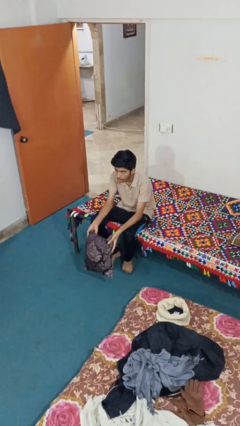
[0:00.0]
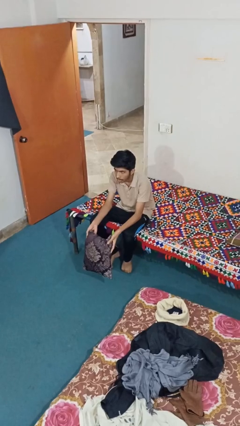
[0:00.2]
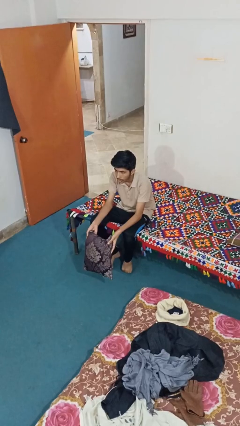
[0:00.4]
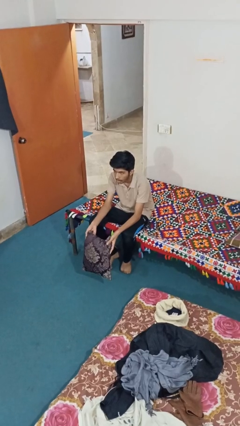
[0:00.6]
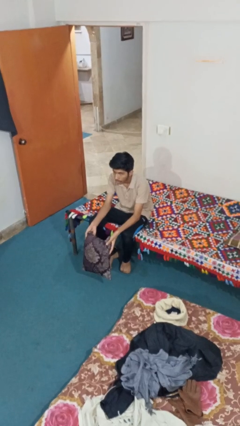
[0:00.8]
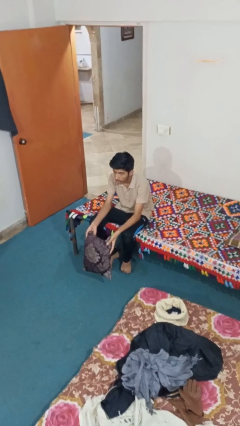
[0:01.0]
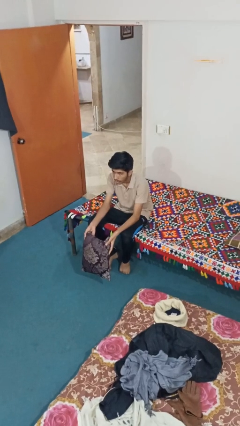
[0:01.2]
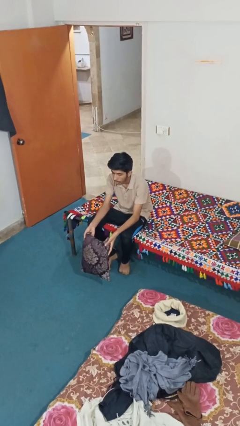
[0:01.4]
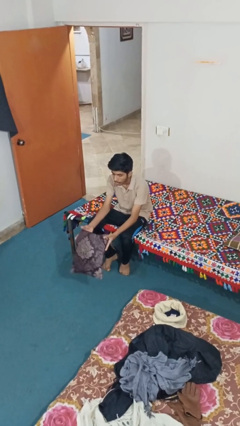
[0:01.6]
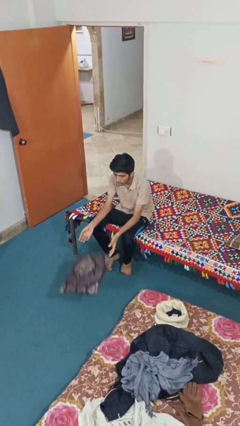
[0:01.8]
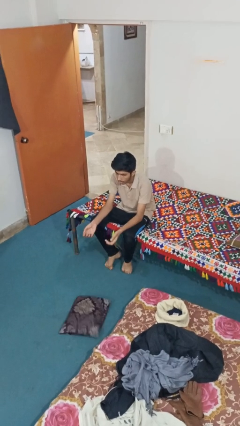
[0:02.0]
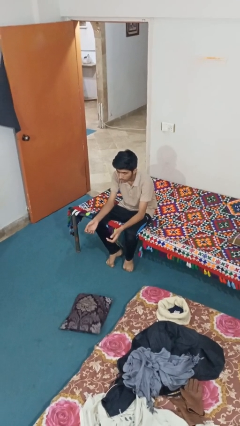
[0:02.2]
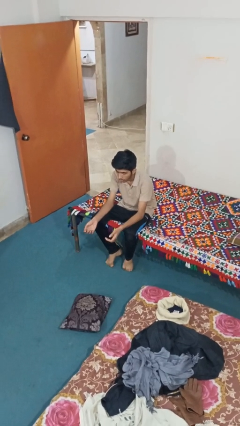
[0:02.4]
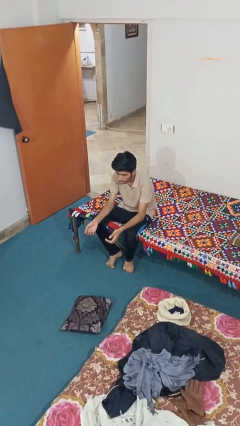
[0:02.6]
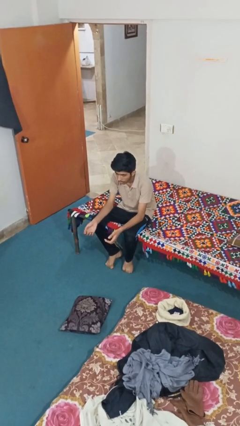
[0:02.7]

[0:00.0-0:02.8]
person drops object

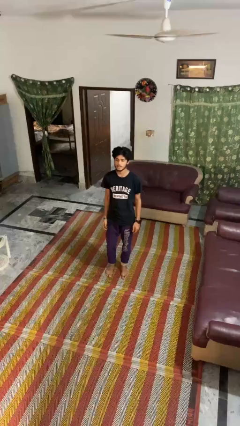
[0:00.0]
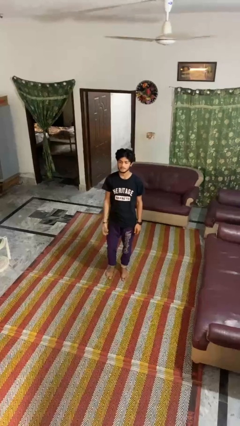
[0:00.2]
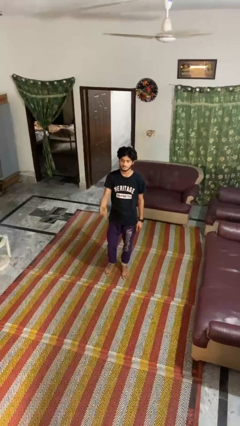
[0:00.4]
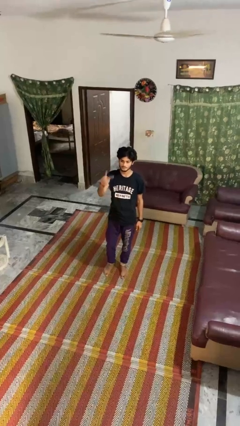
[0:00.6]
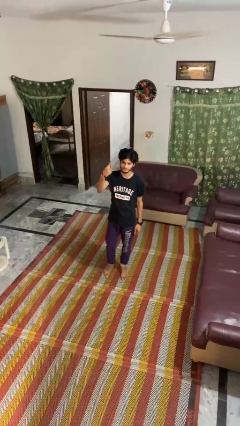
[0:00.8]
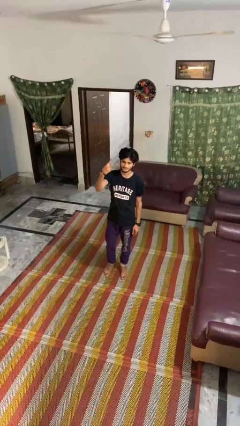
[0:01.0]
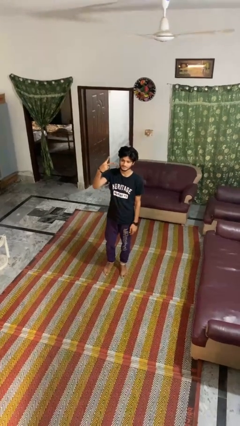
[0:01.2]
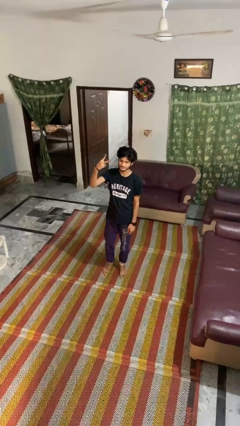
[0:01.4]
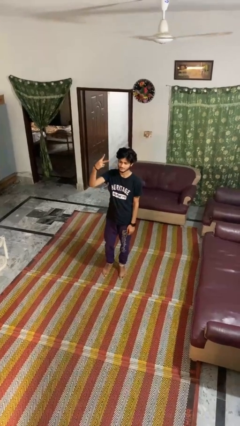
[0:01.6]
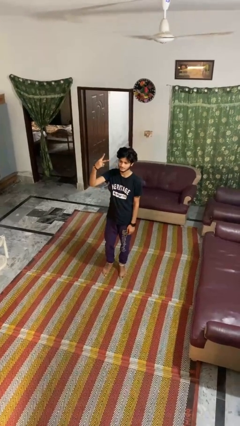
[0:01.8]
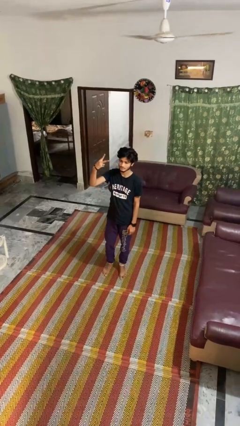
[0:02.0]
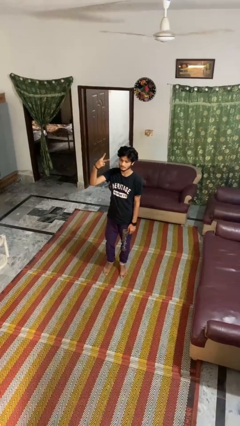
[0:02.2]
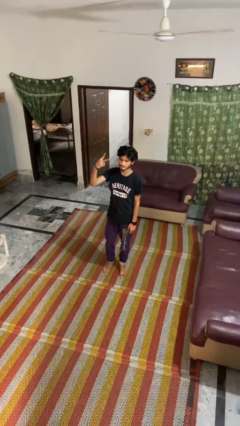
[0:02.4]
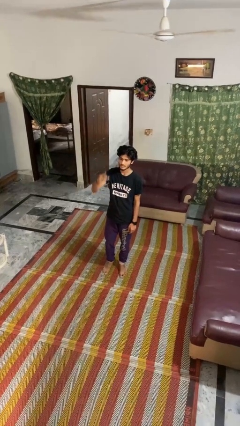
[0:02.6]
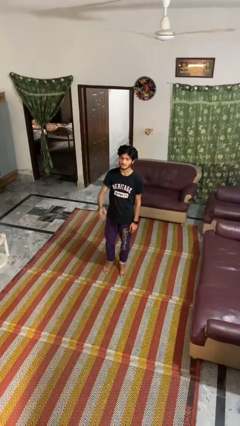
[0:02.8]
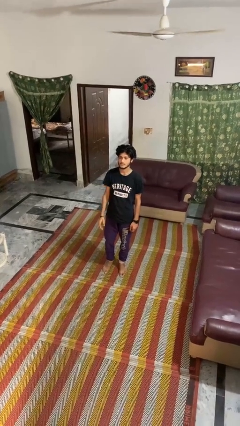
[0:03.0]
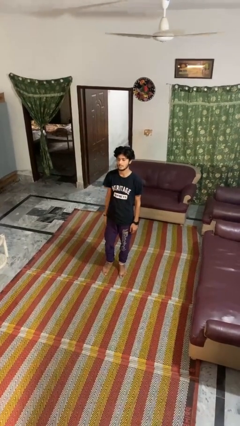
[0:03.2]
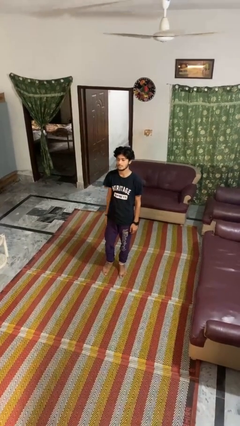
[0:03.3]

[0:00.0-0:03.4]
person gestures peace

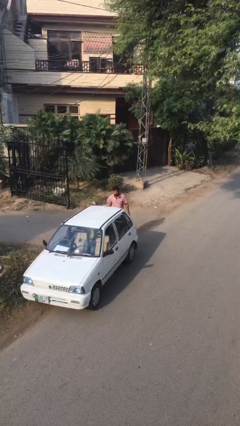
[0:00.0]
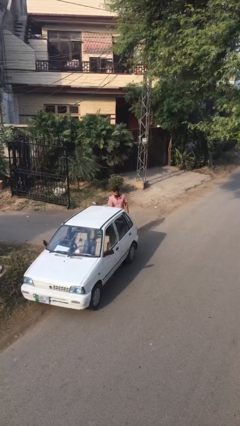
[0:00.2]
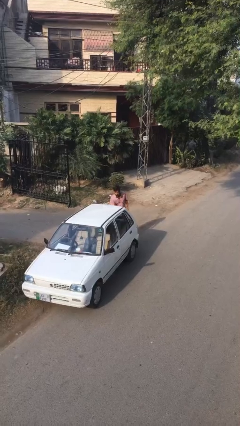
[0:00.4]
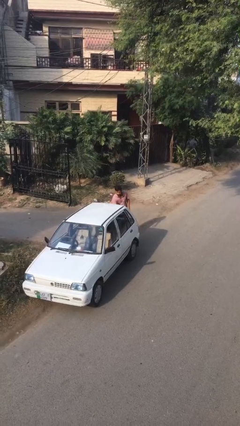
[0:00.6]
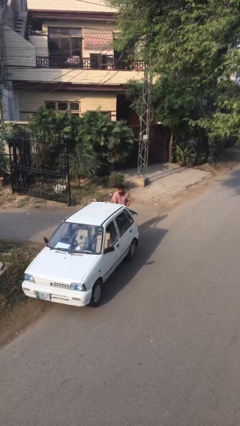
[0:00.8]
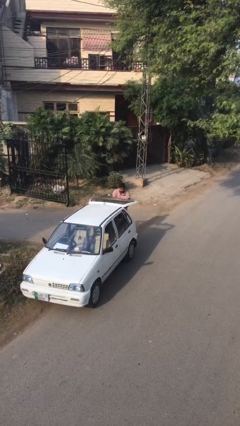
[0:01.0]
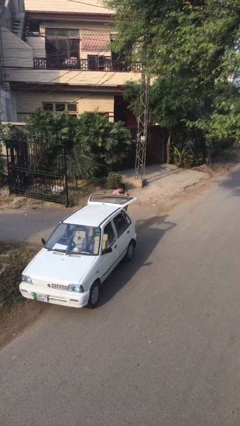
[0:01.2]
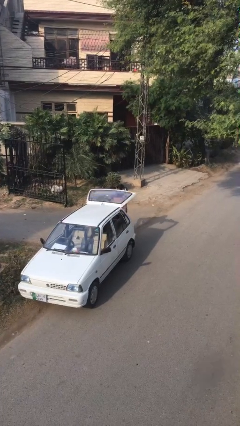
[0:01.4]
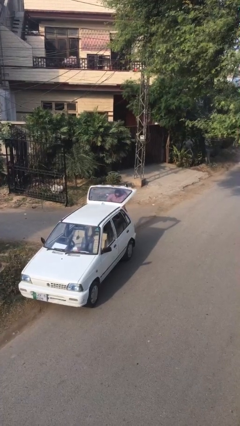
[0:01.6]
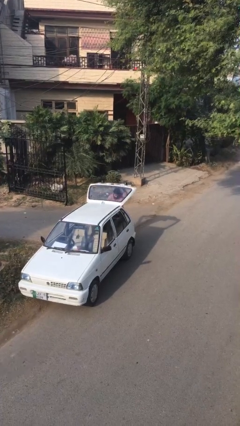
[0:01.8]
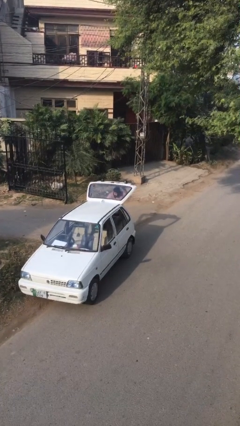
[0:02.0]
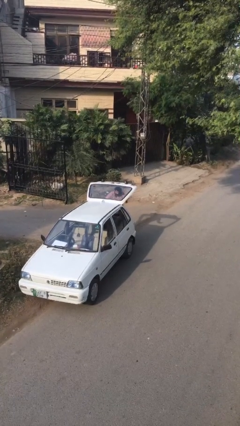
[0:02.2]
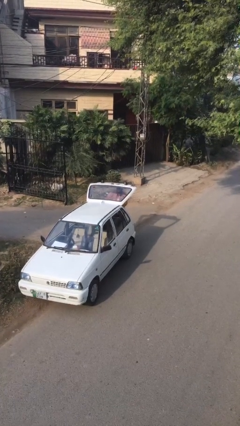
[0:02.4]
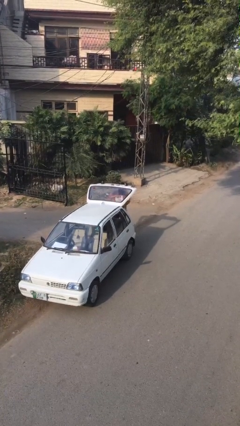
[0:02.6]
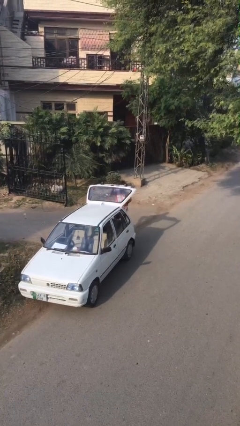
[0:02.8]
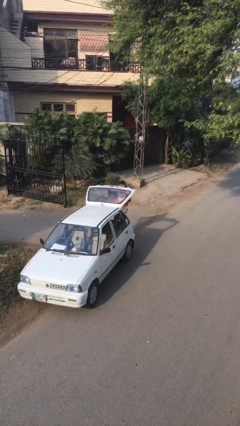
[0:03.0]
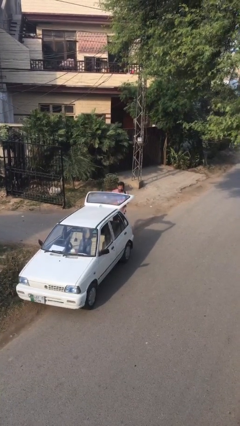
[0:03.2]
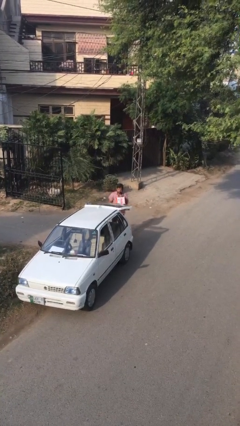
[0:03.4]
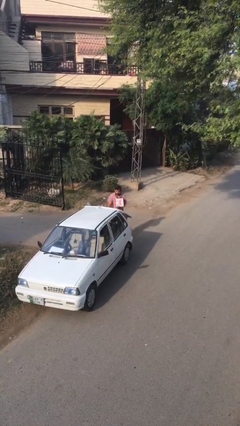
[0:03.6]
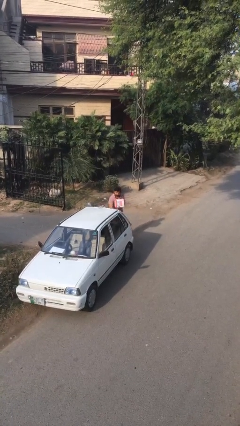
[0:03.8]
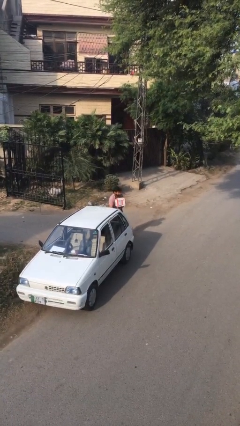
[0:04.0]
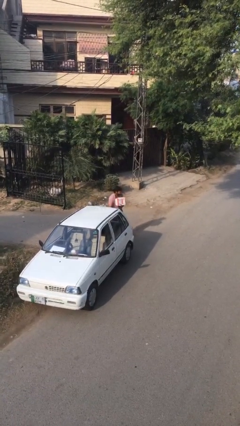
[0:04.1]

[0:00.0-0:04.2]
person unloads car

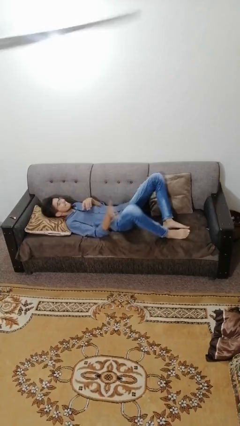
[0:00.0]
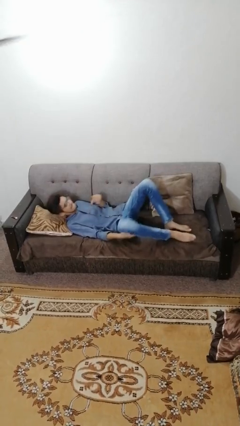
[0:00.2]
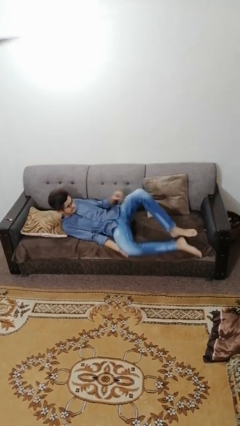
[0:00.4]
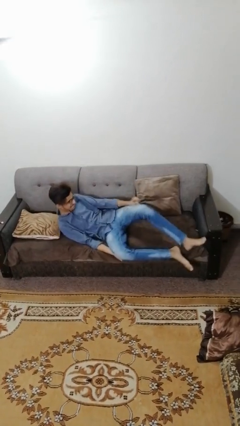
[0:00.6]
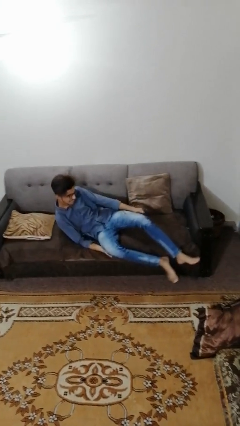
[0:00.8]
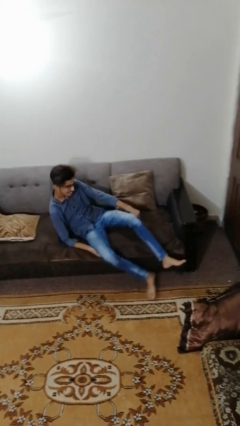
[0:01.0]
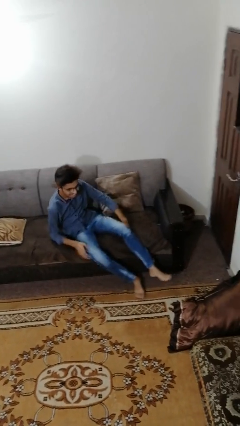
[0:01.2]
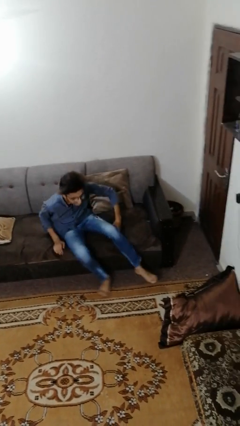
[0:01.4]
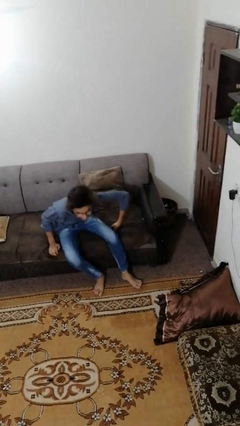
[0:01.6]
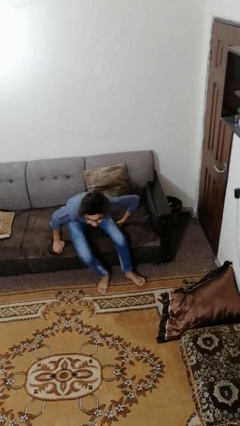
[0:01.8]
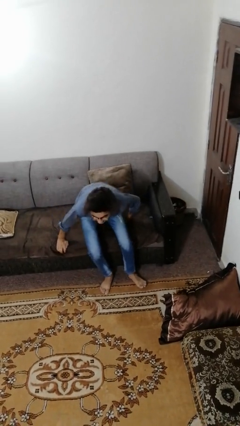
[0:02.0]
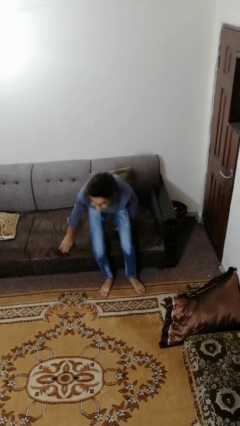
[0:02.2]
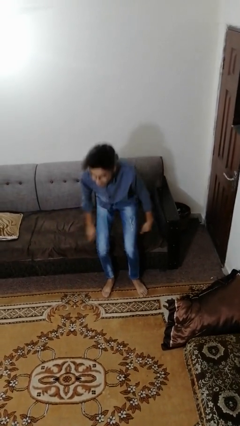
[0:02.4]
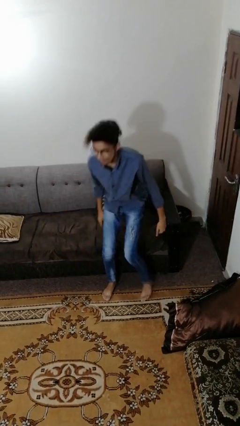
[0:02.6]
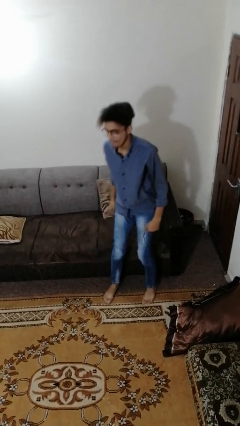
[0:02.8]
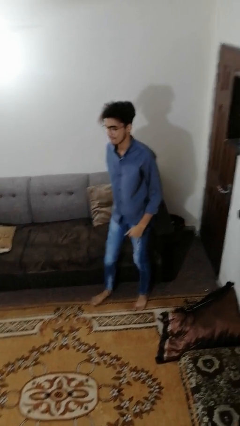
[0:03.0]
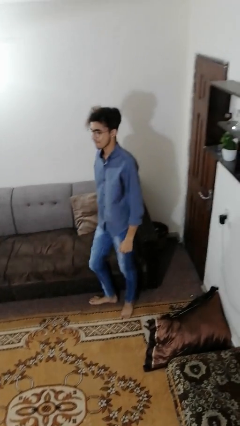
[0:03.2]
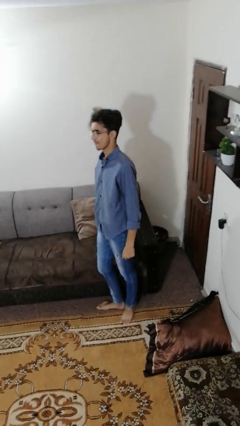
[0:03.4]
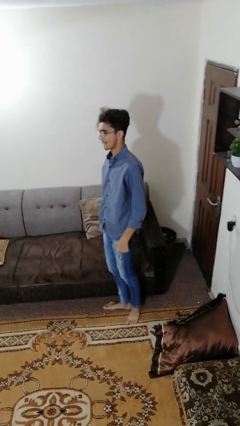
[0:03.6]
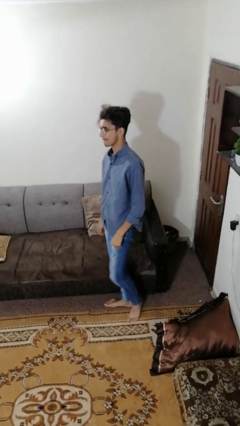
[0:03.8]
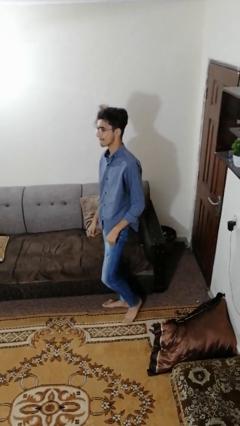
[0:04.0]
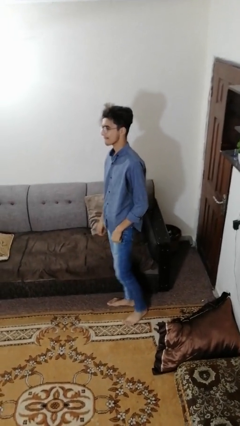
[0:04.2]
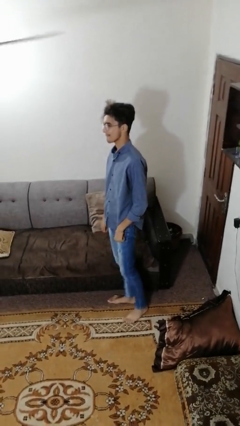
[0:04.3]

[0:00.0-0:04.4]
person stands up

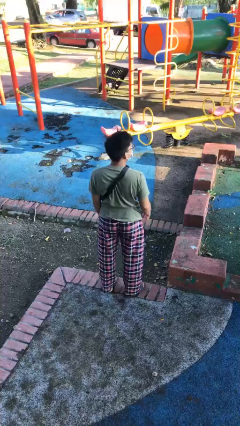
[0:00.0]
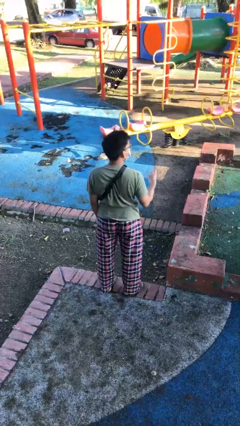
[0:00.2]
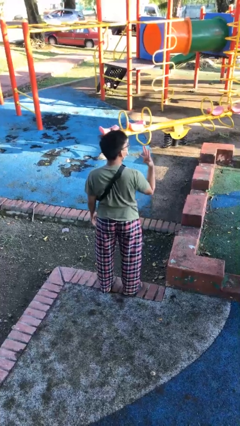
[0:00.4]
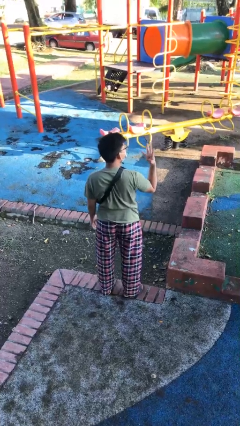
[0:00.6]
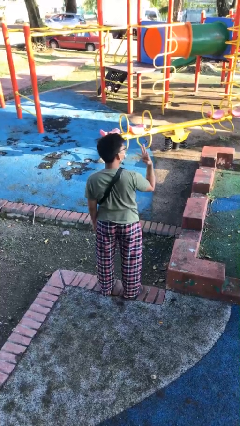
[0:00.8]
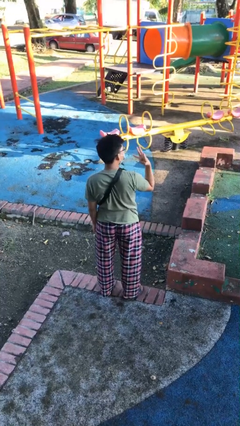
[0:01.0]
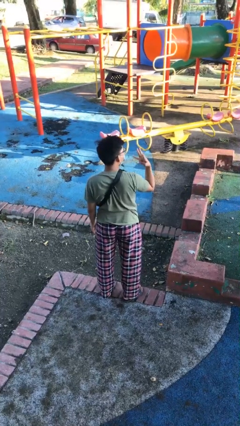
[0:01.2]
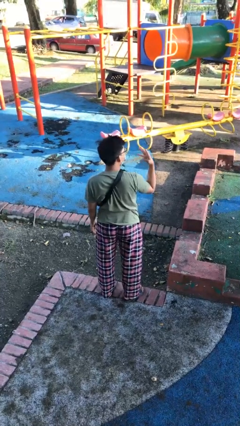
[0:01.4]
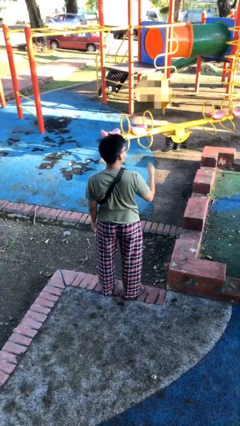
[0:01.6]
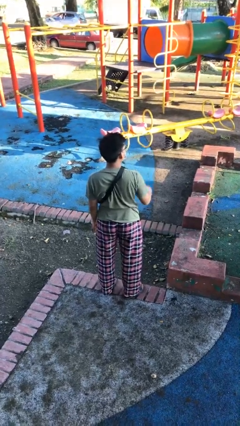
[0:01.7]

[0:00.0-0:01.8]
person gestures number four

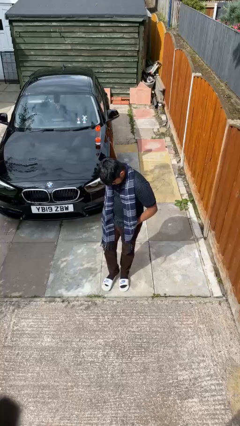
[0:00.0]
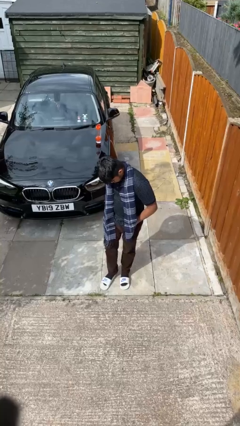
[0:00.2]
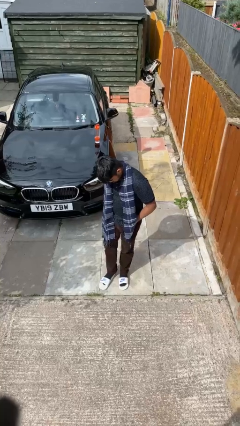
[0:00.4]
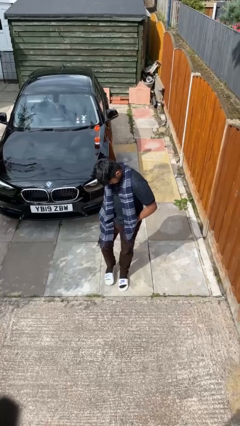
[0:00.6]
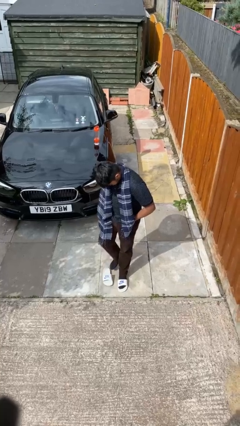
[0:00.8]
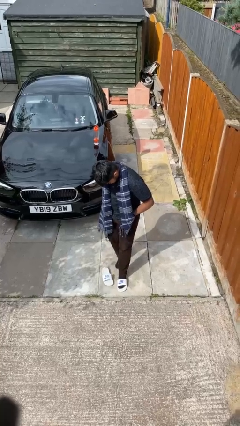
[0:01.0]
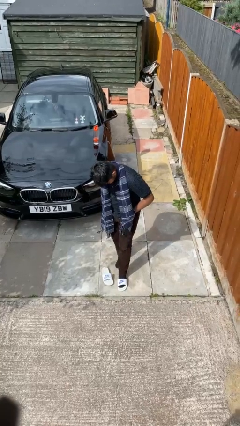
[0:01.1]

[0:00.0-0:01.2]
person takes off shoes
